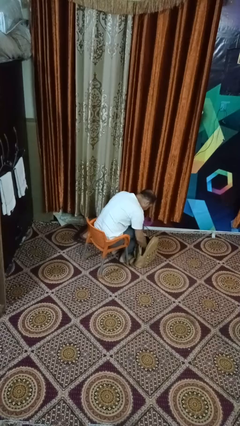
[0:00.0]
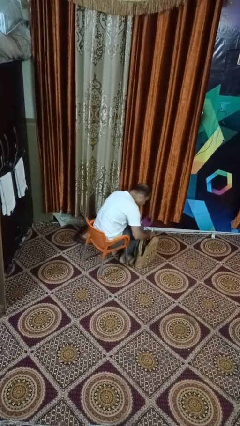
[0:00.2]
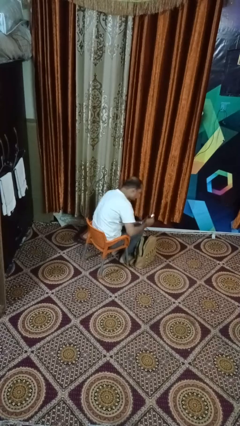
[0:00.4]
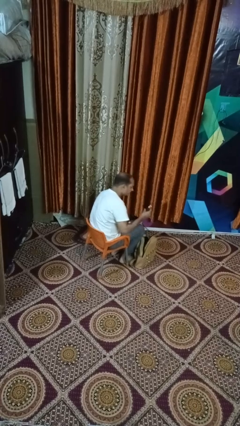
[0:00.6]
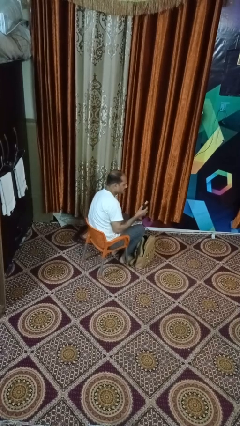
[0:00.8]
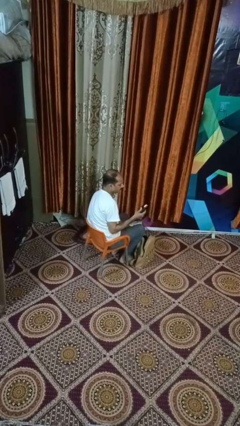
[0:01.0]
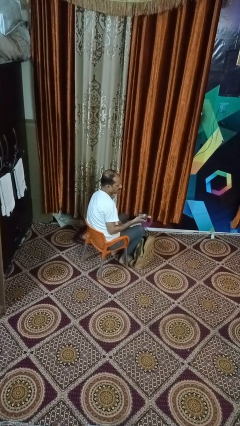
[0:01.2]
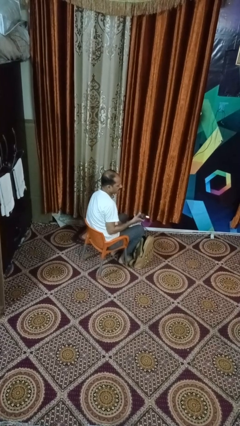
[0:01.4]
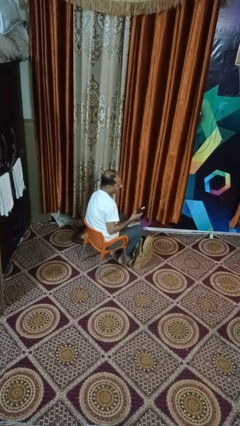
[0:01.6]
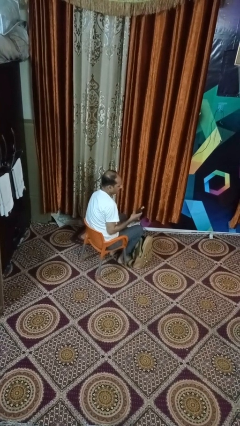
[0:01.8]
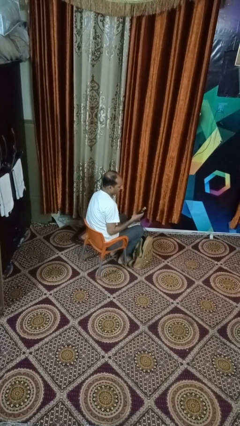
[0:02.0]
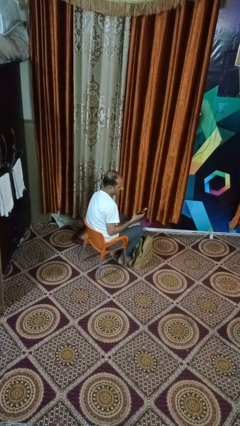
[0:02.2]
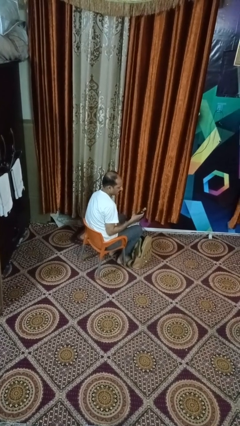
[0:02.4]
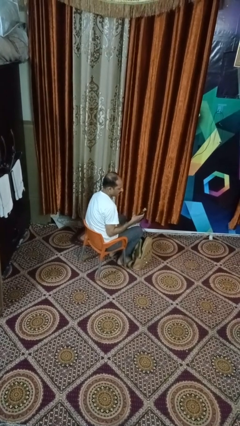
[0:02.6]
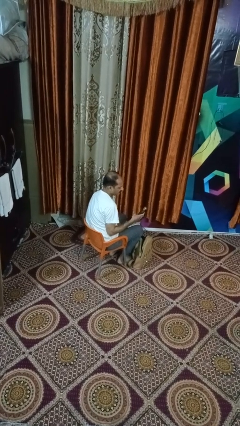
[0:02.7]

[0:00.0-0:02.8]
person takes object from purse

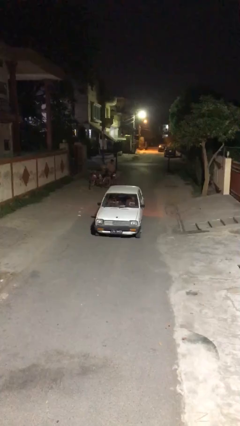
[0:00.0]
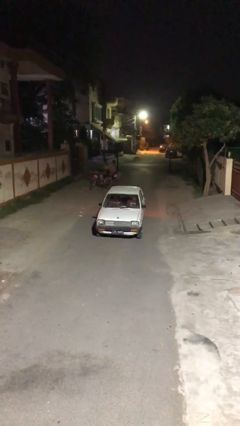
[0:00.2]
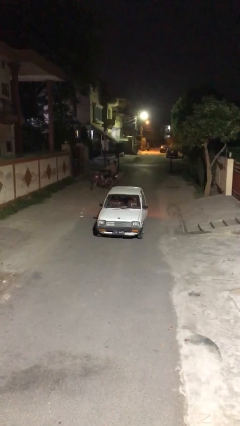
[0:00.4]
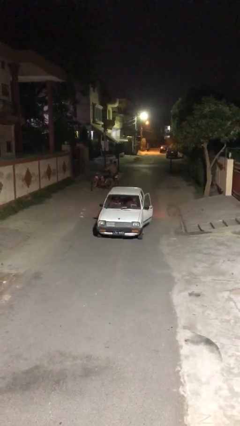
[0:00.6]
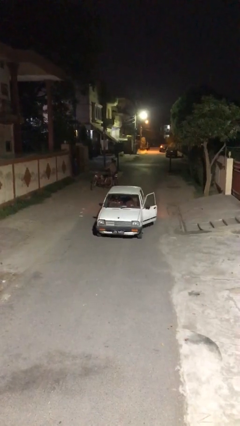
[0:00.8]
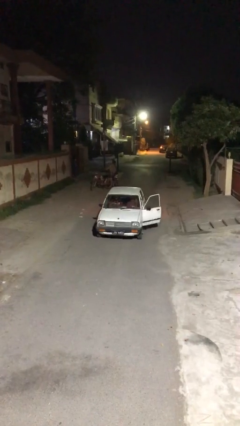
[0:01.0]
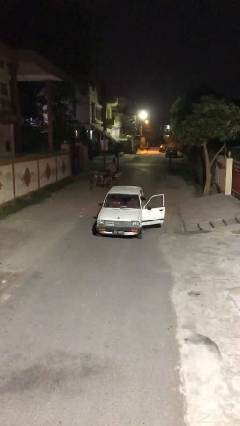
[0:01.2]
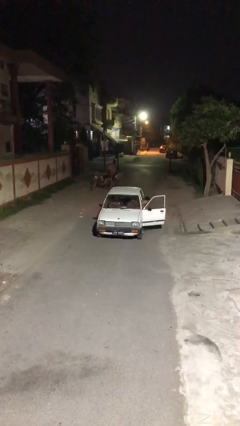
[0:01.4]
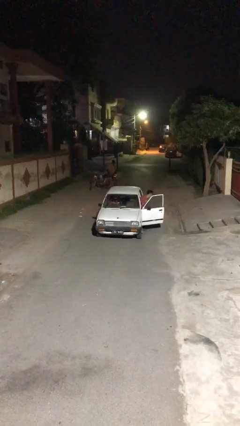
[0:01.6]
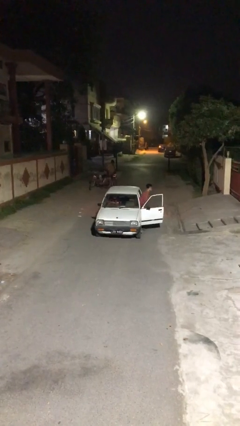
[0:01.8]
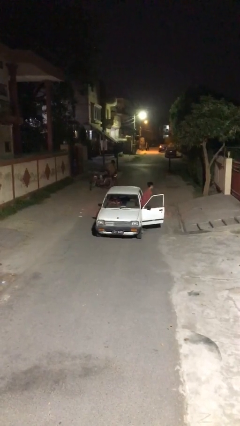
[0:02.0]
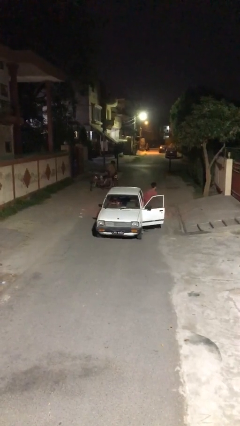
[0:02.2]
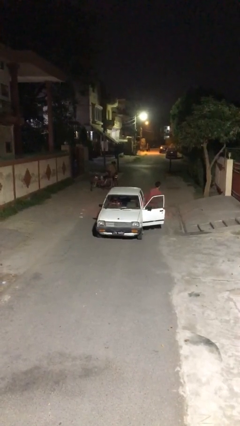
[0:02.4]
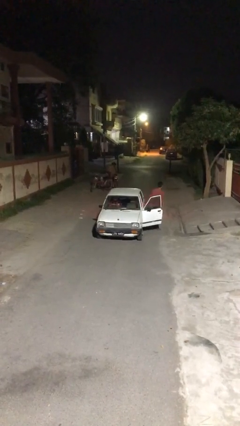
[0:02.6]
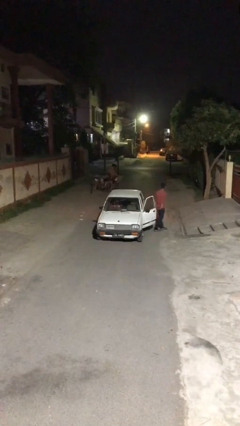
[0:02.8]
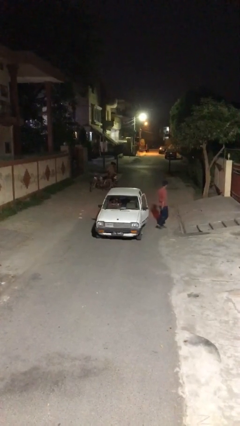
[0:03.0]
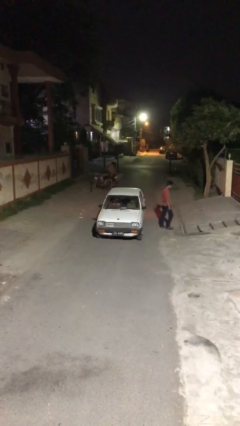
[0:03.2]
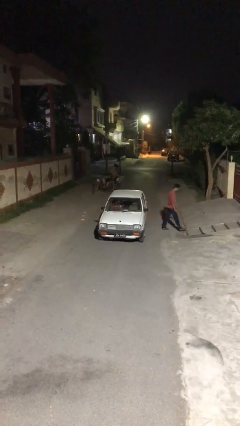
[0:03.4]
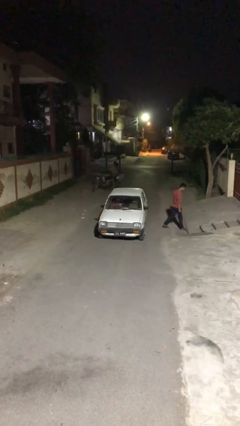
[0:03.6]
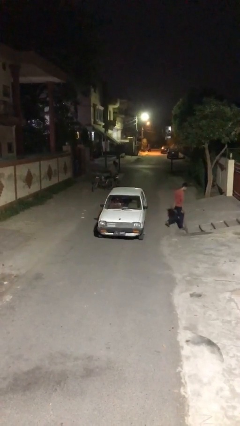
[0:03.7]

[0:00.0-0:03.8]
car drops off person

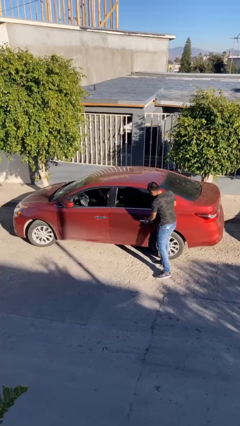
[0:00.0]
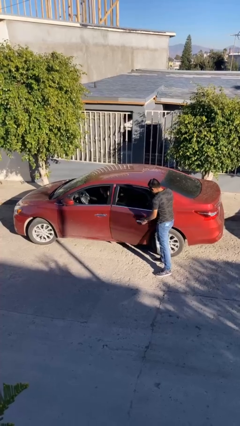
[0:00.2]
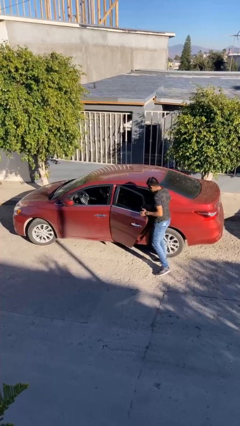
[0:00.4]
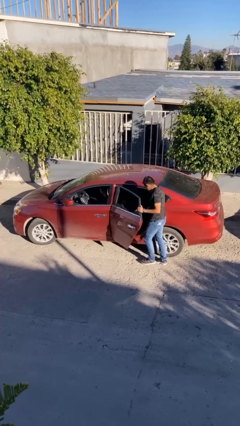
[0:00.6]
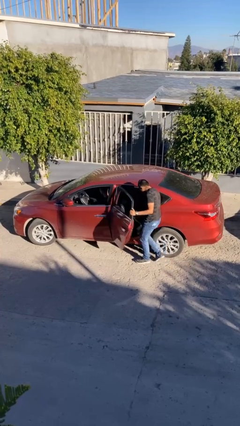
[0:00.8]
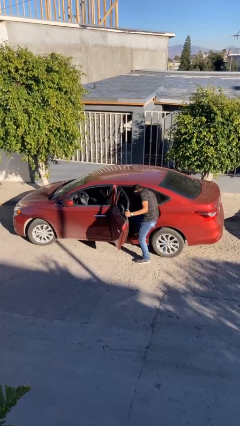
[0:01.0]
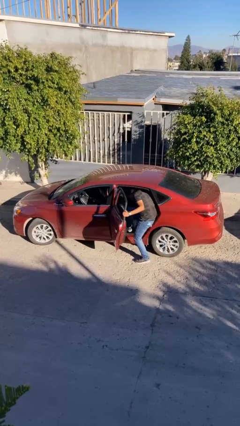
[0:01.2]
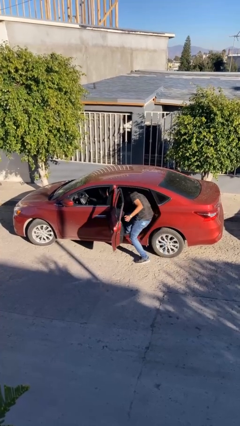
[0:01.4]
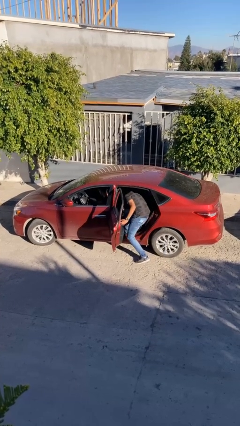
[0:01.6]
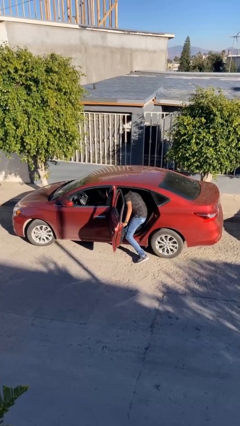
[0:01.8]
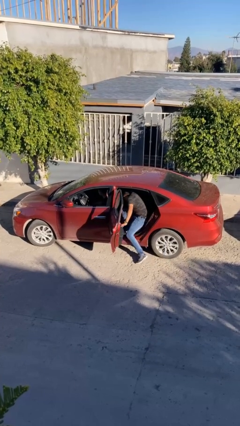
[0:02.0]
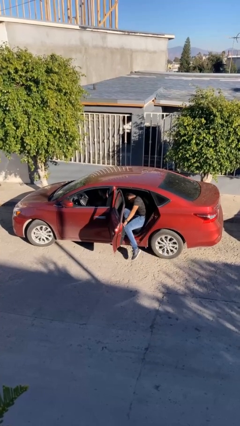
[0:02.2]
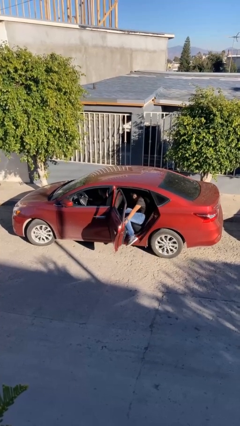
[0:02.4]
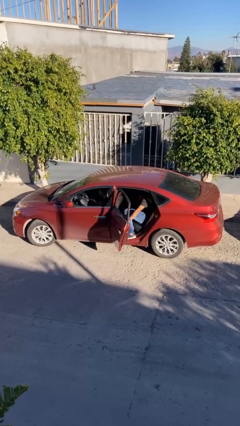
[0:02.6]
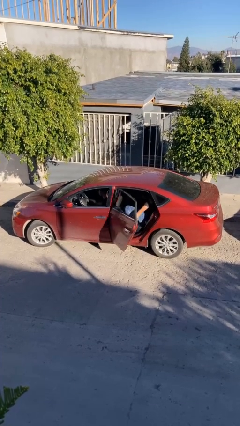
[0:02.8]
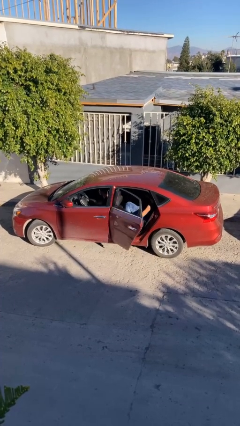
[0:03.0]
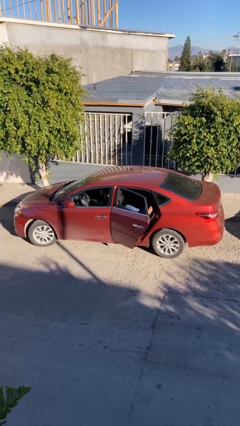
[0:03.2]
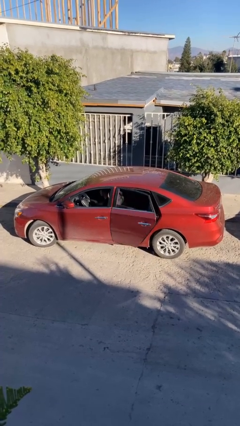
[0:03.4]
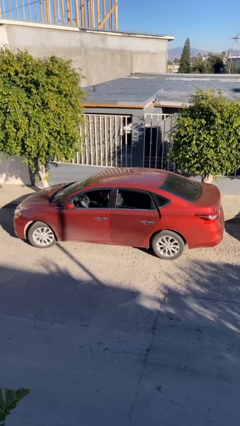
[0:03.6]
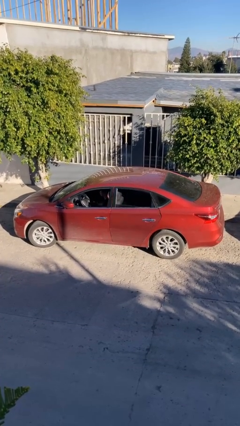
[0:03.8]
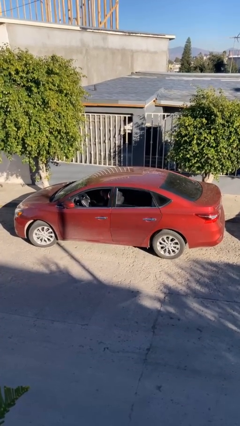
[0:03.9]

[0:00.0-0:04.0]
car picks up person

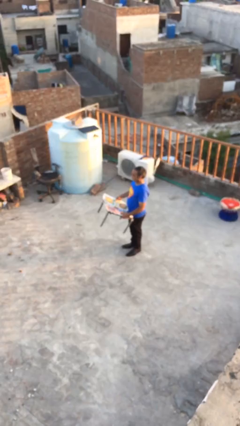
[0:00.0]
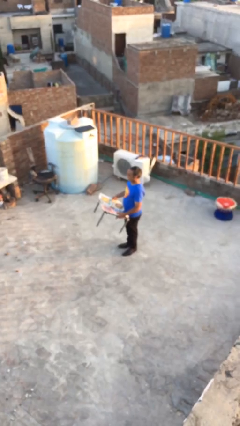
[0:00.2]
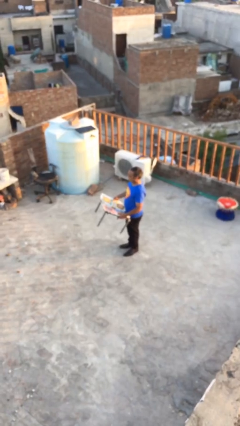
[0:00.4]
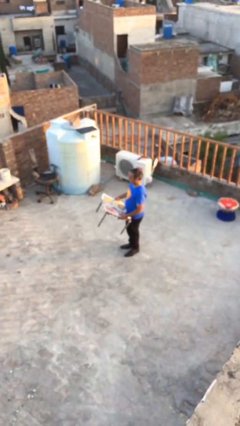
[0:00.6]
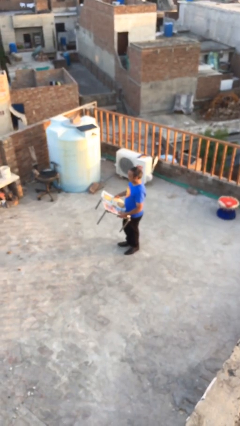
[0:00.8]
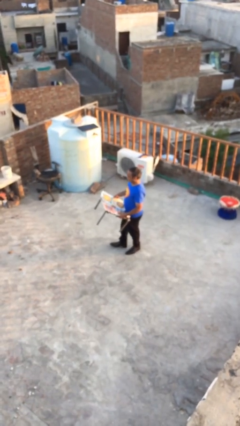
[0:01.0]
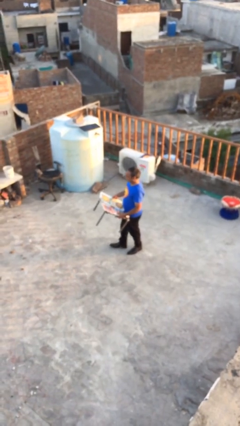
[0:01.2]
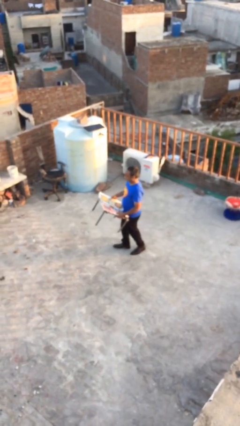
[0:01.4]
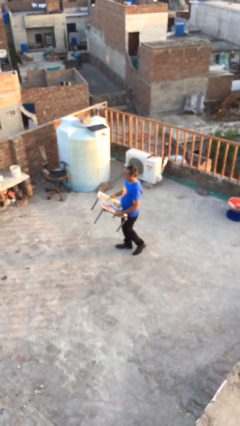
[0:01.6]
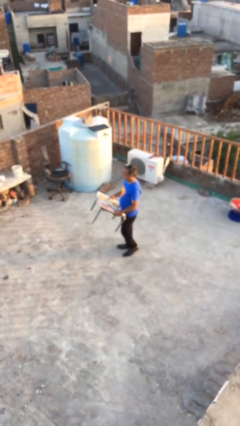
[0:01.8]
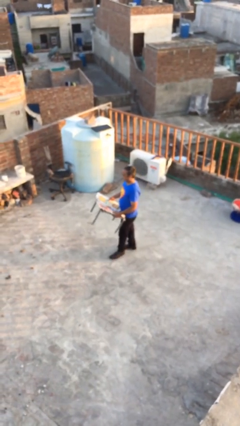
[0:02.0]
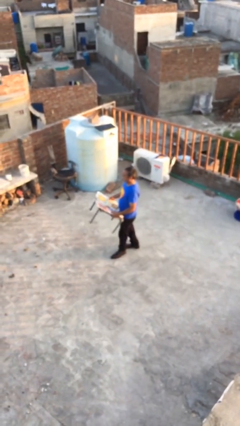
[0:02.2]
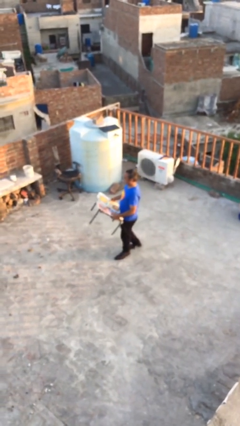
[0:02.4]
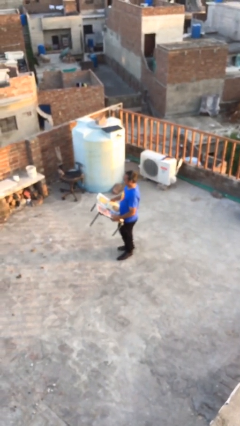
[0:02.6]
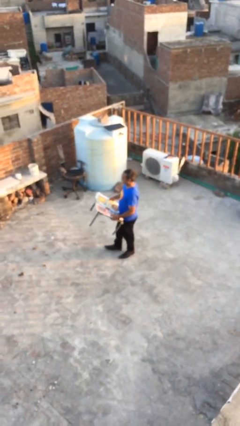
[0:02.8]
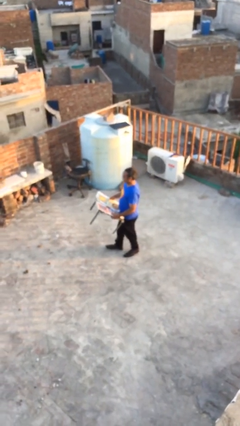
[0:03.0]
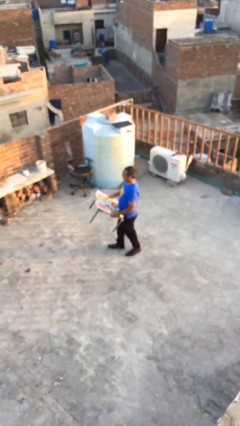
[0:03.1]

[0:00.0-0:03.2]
person carries heavy object

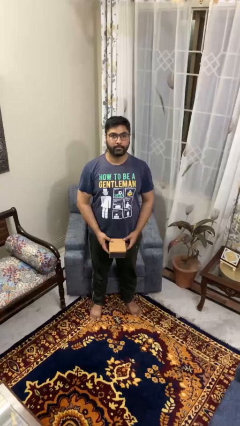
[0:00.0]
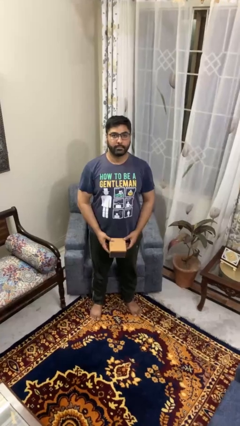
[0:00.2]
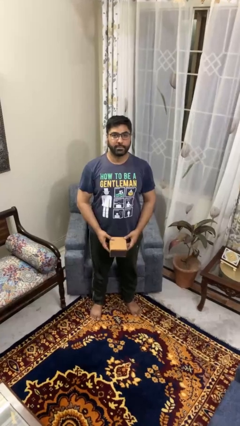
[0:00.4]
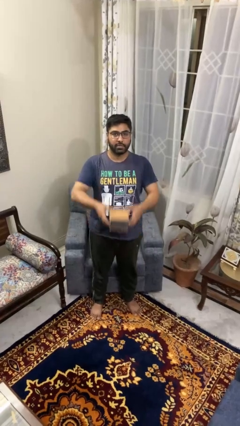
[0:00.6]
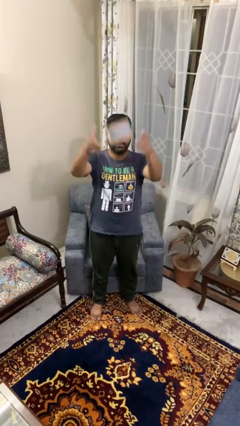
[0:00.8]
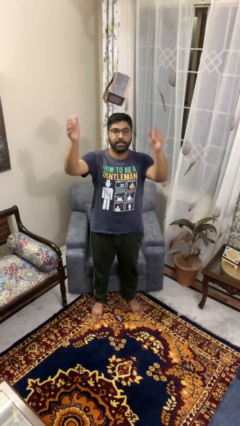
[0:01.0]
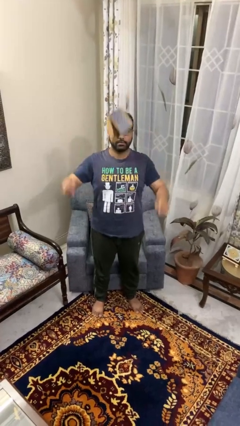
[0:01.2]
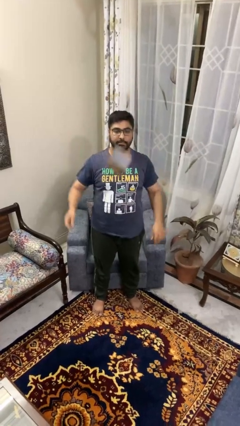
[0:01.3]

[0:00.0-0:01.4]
person throws object into air

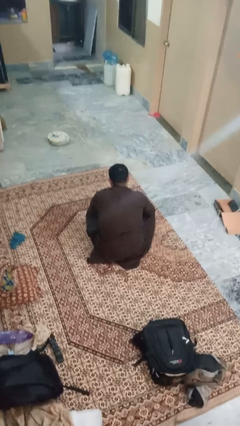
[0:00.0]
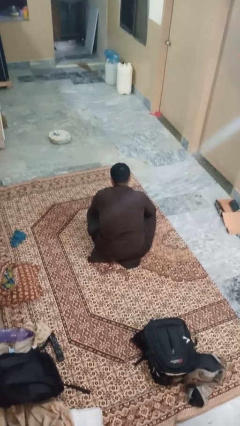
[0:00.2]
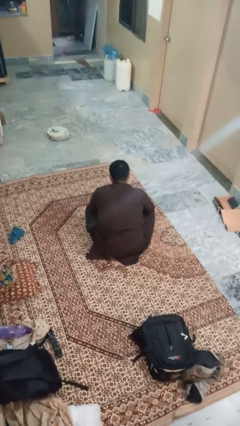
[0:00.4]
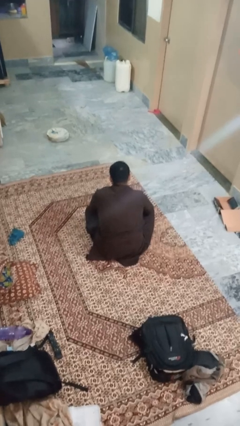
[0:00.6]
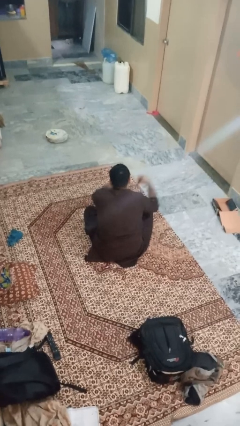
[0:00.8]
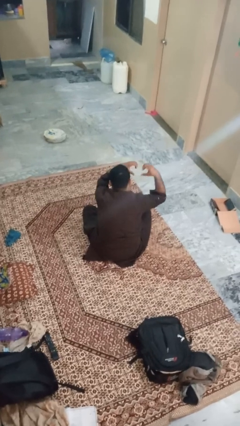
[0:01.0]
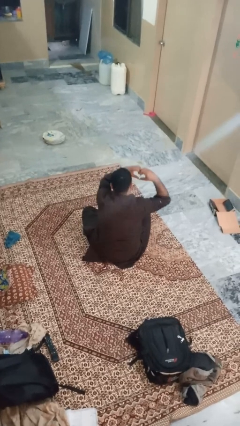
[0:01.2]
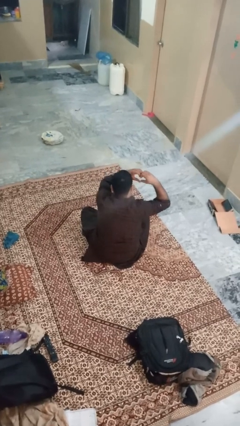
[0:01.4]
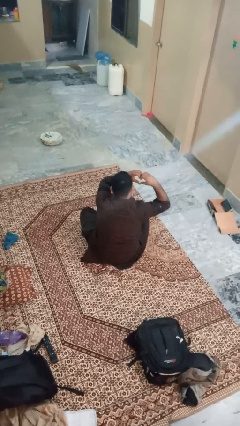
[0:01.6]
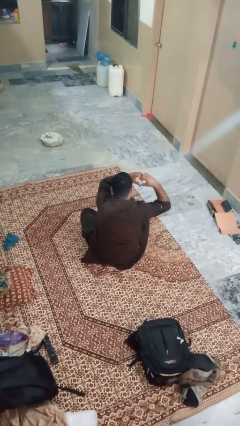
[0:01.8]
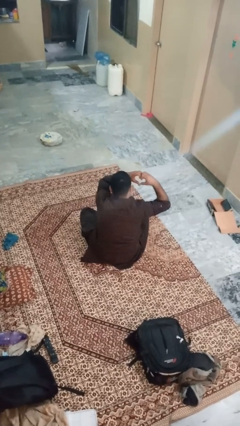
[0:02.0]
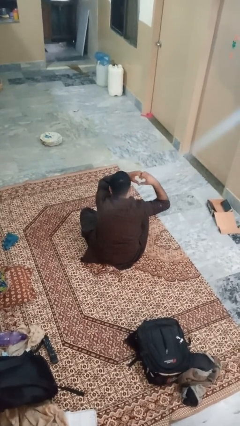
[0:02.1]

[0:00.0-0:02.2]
person gestures heart

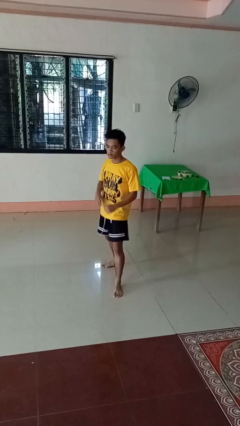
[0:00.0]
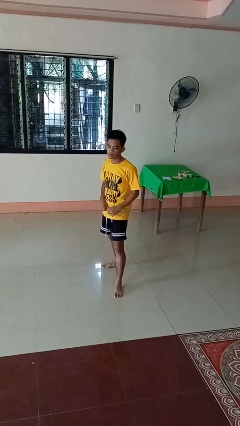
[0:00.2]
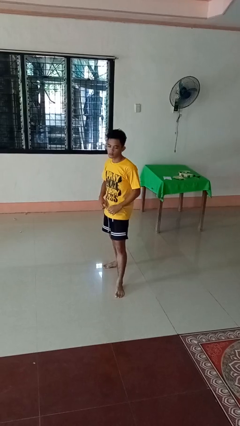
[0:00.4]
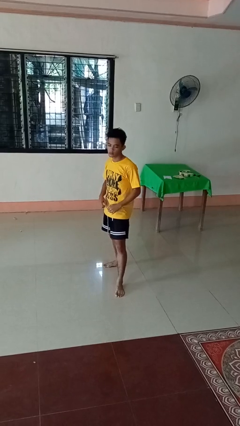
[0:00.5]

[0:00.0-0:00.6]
person karate chop
